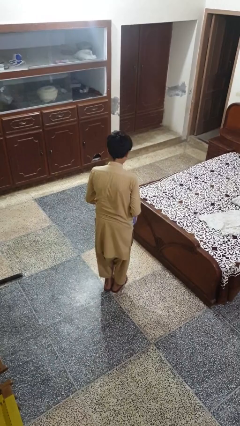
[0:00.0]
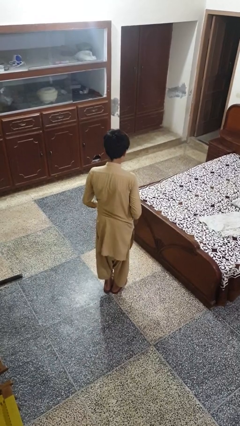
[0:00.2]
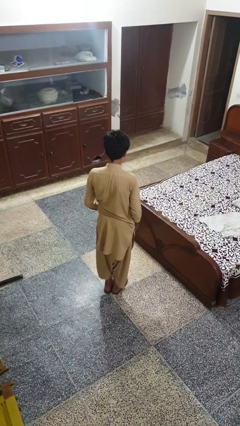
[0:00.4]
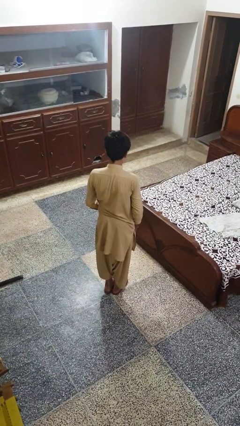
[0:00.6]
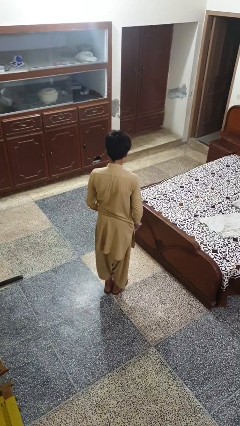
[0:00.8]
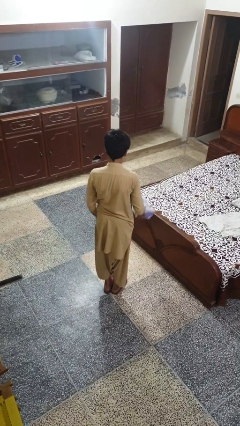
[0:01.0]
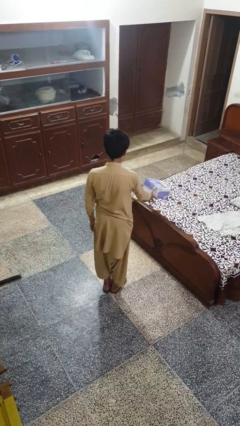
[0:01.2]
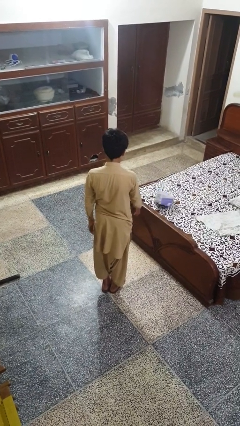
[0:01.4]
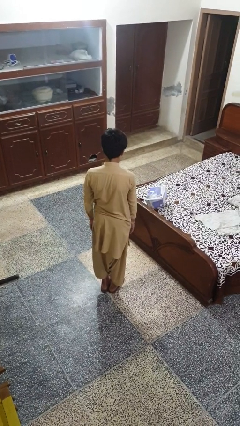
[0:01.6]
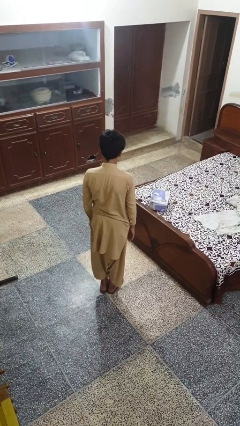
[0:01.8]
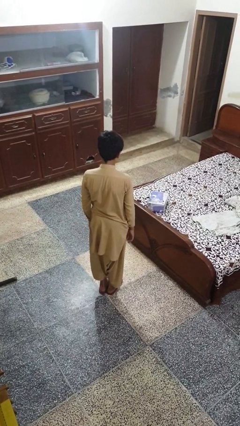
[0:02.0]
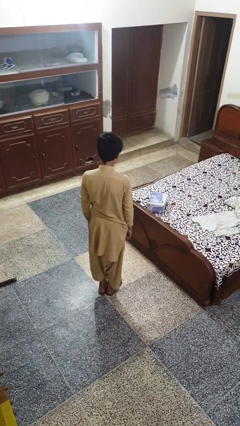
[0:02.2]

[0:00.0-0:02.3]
person throws object on bed

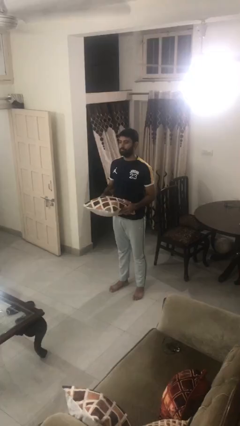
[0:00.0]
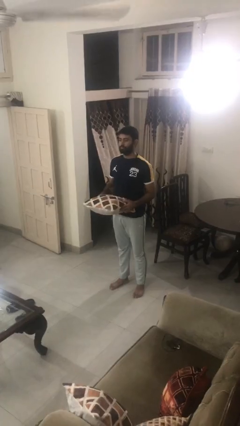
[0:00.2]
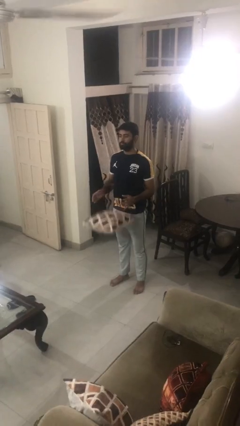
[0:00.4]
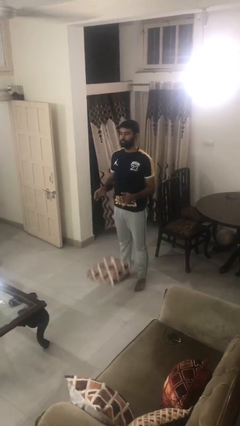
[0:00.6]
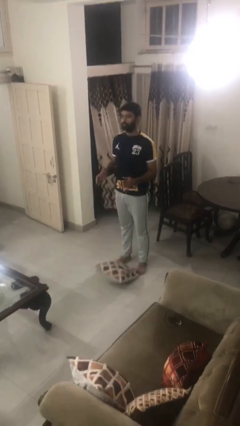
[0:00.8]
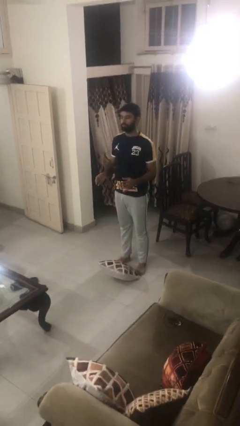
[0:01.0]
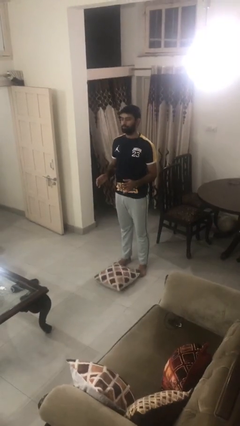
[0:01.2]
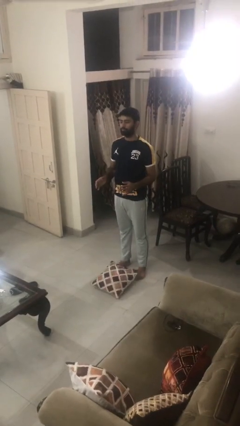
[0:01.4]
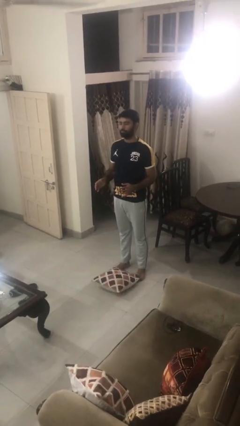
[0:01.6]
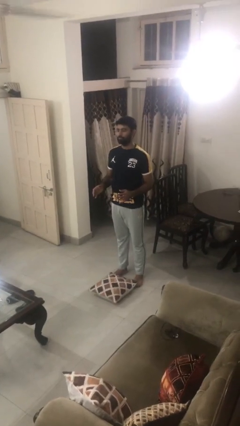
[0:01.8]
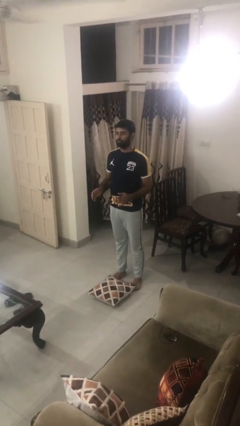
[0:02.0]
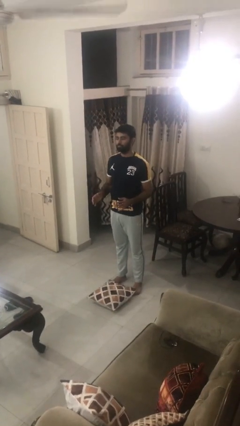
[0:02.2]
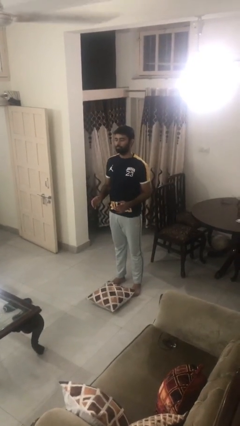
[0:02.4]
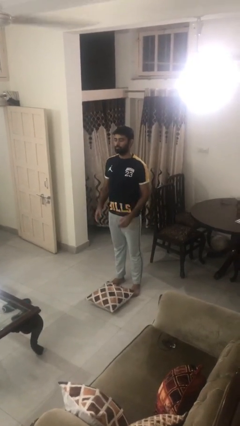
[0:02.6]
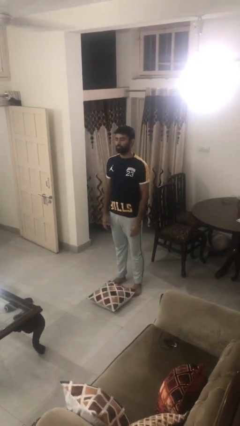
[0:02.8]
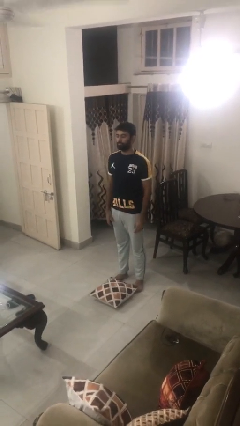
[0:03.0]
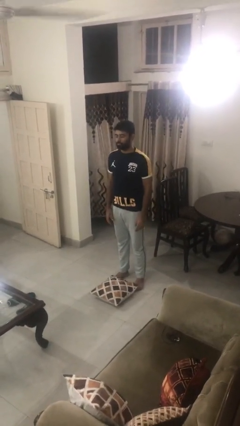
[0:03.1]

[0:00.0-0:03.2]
person drops object

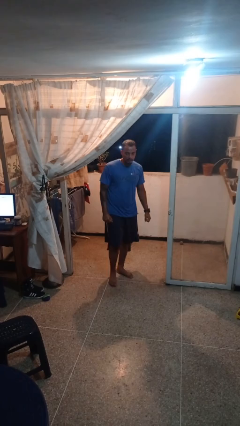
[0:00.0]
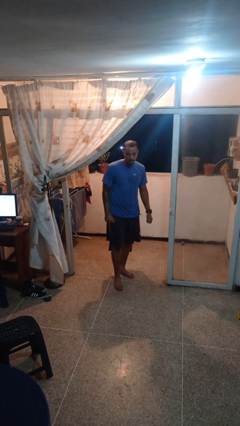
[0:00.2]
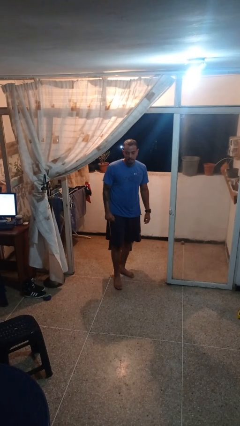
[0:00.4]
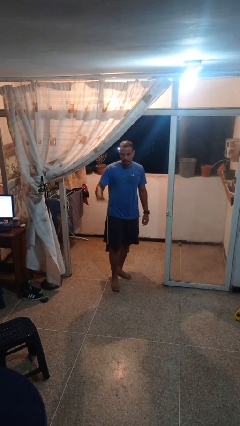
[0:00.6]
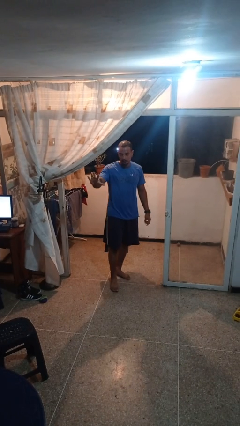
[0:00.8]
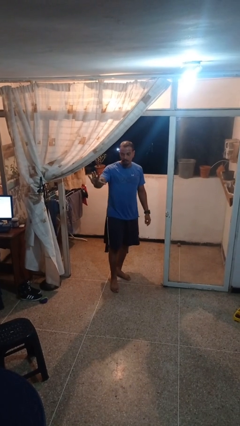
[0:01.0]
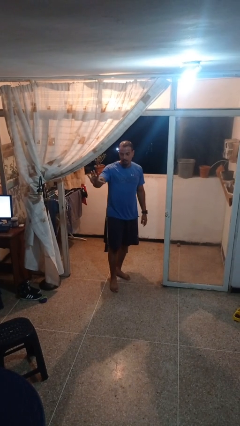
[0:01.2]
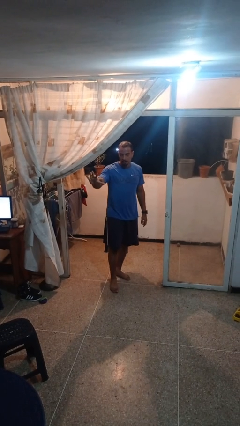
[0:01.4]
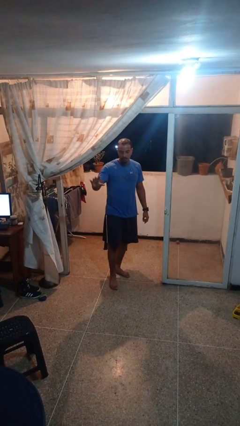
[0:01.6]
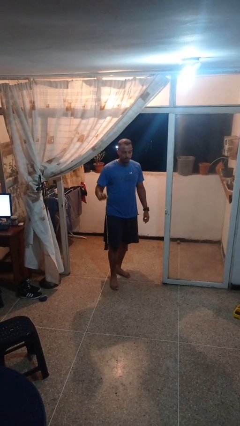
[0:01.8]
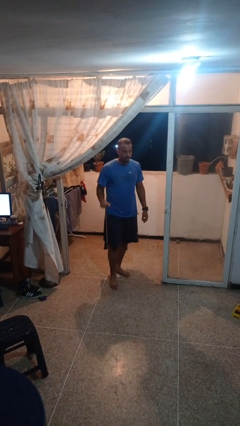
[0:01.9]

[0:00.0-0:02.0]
person gestures number five

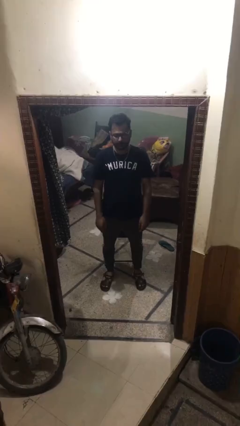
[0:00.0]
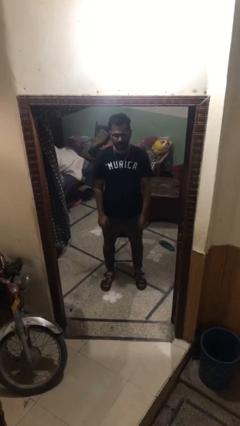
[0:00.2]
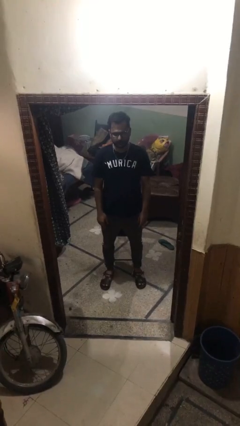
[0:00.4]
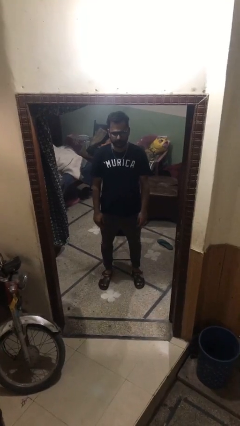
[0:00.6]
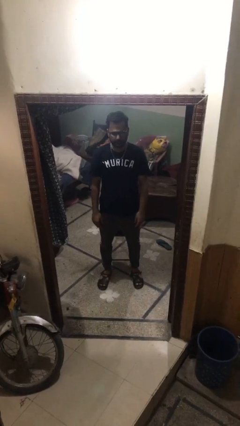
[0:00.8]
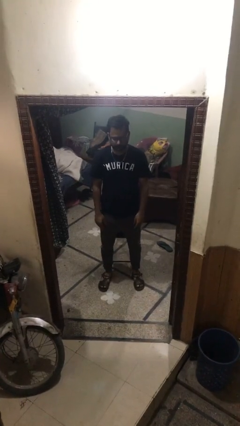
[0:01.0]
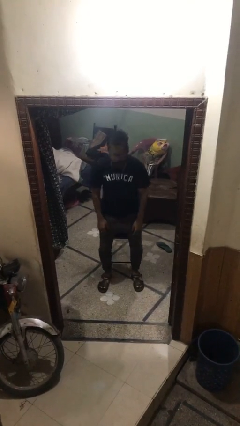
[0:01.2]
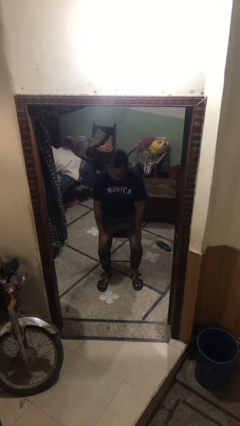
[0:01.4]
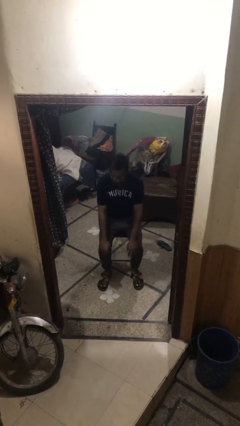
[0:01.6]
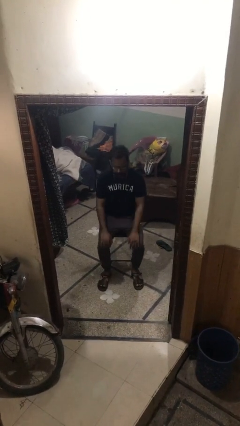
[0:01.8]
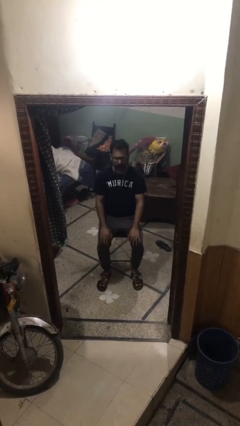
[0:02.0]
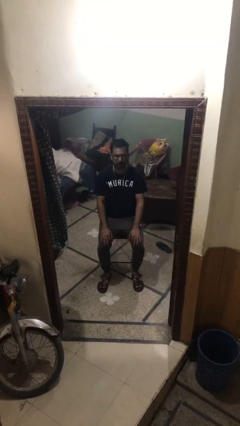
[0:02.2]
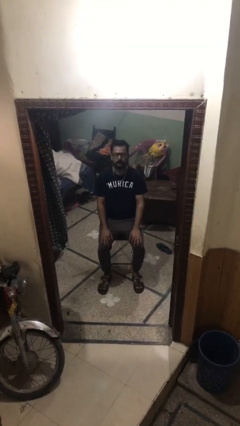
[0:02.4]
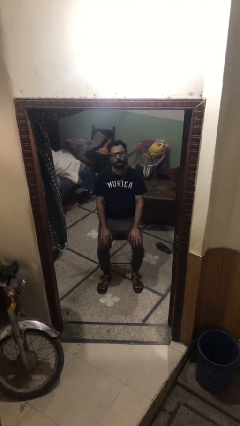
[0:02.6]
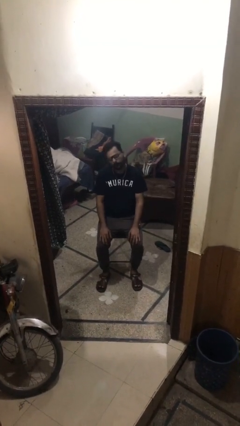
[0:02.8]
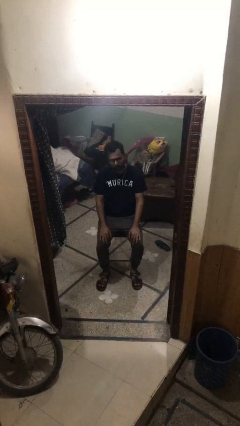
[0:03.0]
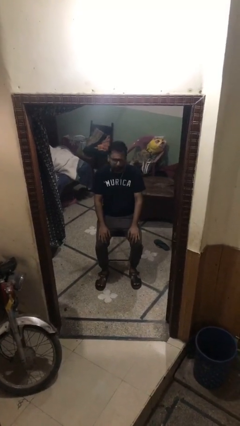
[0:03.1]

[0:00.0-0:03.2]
person sits down

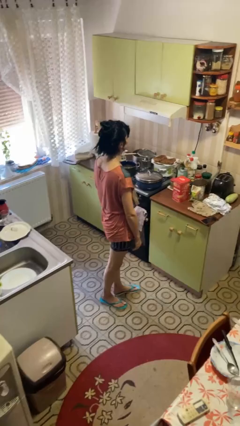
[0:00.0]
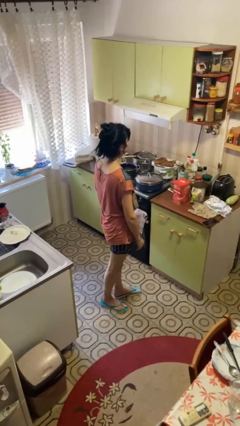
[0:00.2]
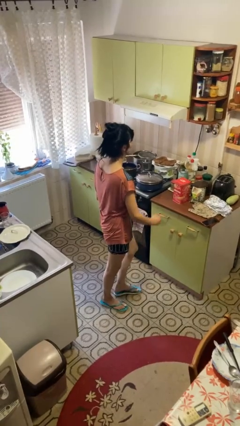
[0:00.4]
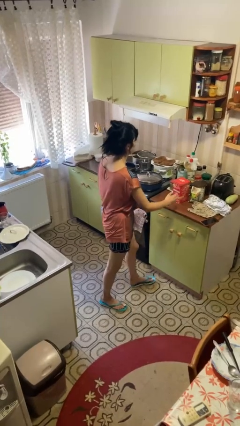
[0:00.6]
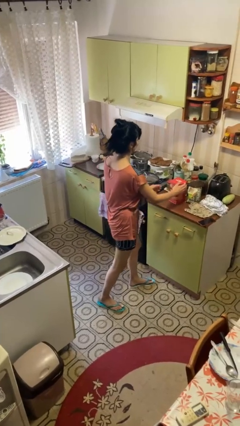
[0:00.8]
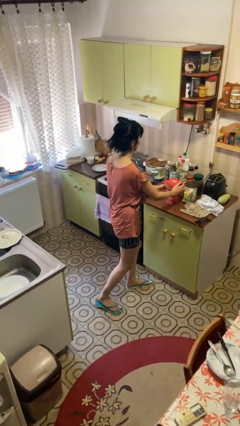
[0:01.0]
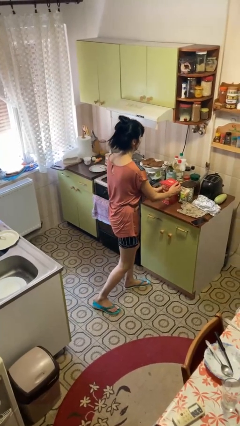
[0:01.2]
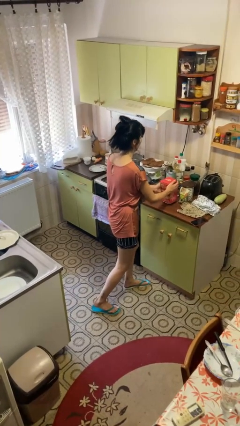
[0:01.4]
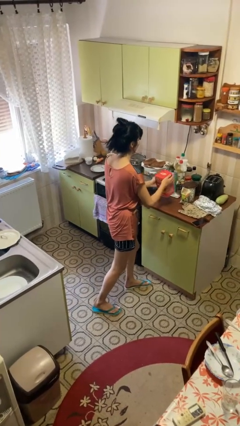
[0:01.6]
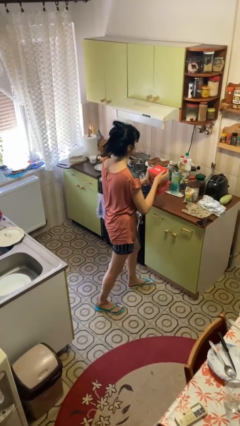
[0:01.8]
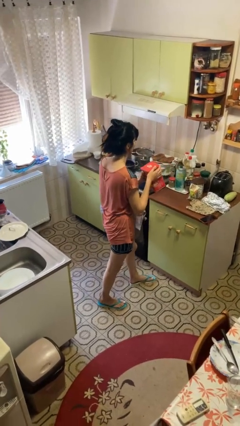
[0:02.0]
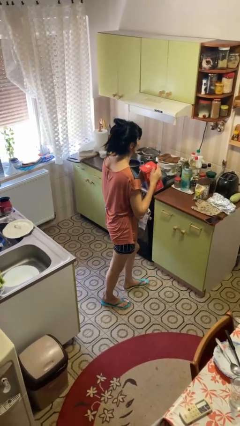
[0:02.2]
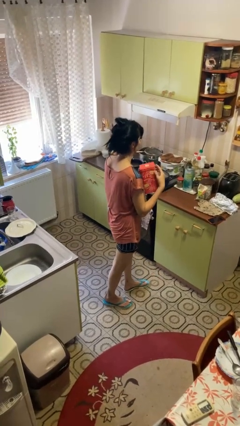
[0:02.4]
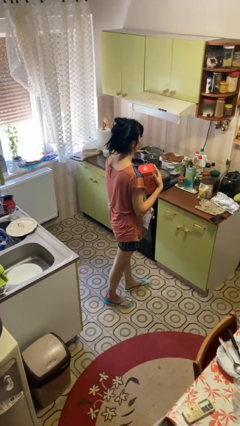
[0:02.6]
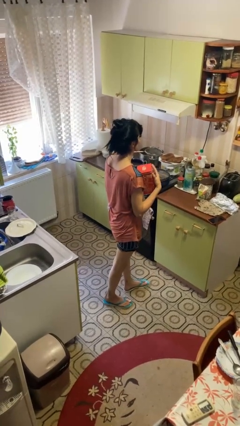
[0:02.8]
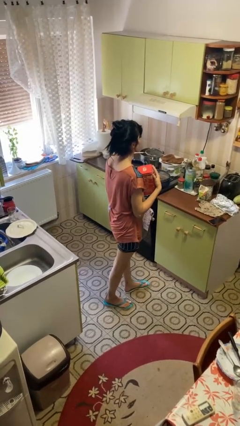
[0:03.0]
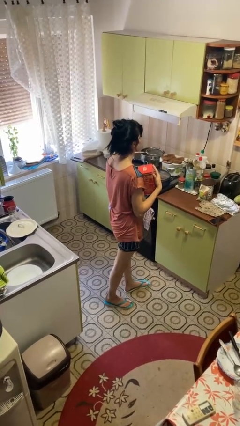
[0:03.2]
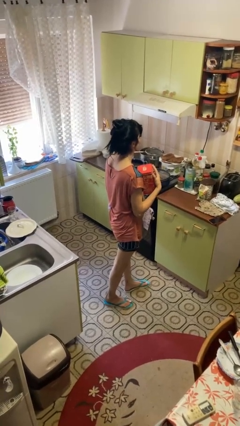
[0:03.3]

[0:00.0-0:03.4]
person picks up object from countertop

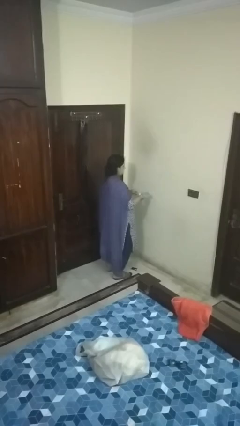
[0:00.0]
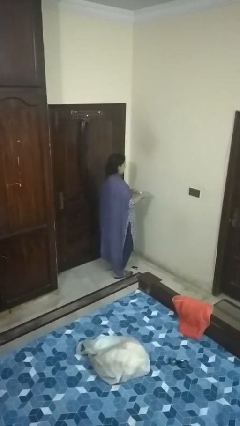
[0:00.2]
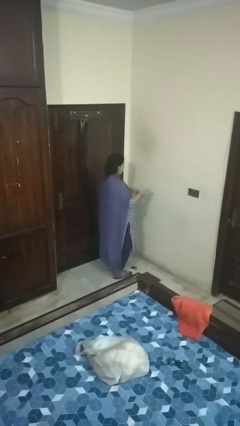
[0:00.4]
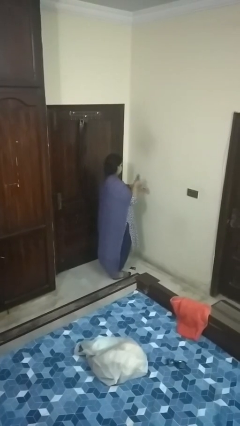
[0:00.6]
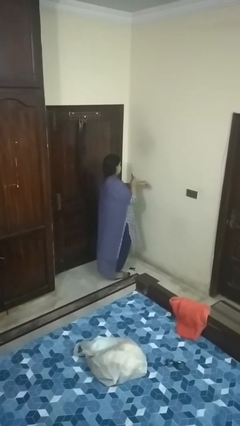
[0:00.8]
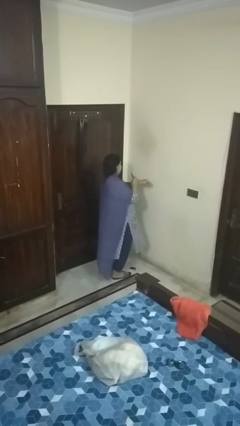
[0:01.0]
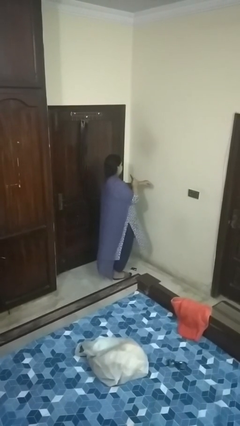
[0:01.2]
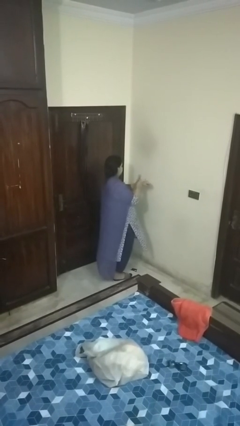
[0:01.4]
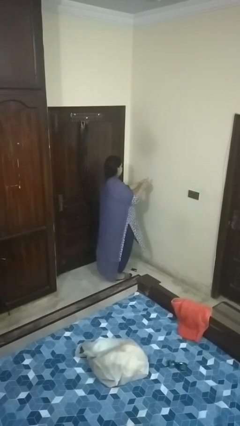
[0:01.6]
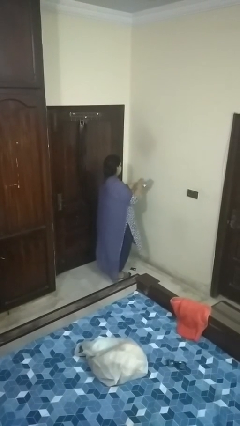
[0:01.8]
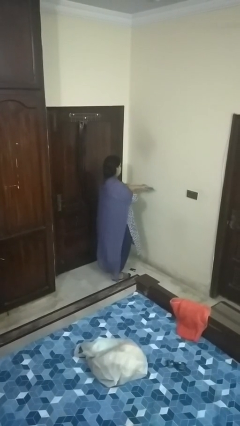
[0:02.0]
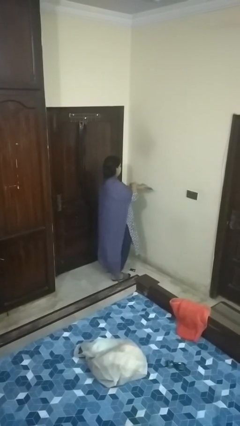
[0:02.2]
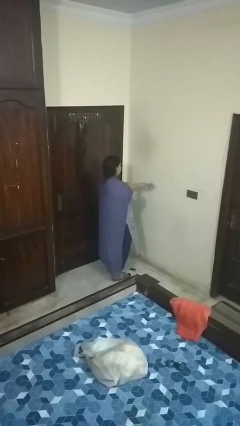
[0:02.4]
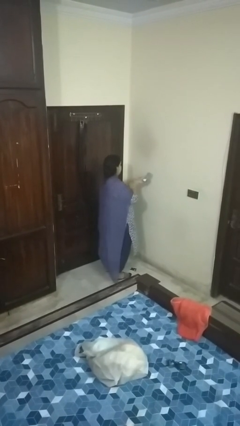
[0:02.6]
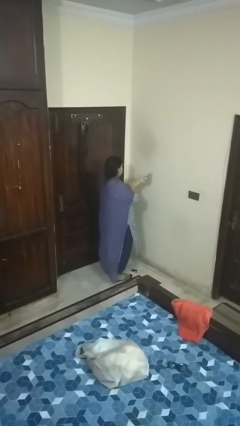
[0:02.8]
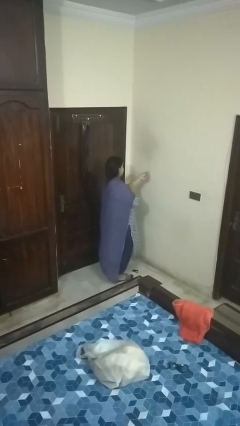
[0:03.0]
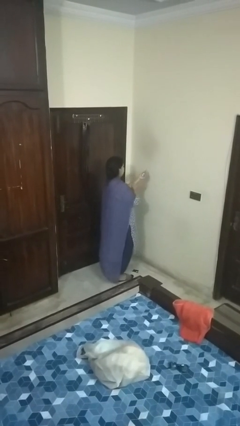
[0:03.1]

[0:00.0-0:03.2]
person applies sunscreen
